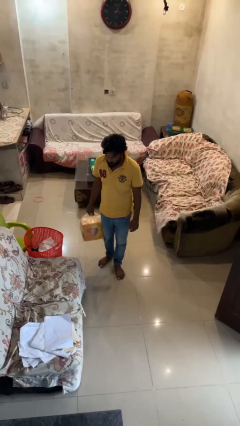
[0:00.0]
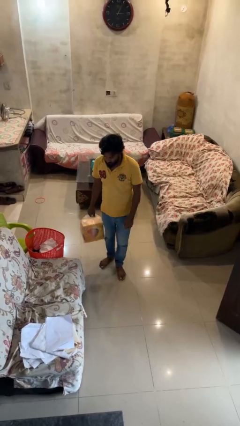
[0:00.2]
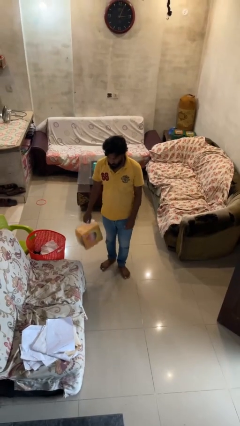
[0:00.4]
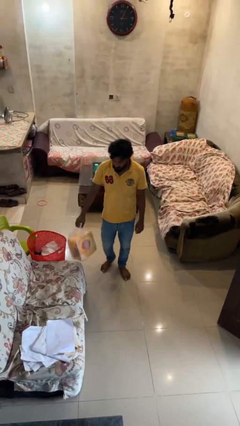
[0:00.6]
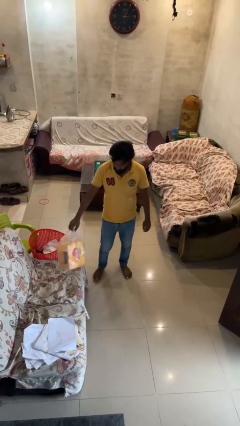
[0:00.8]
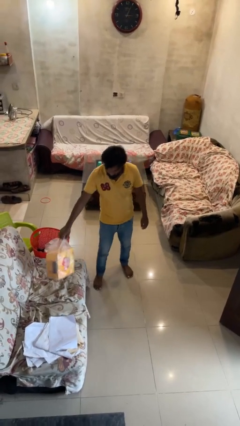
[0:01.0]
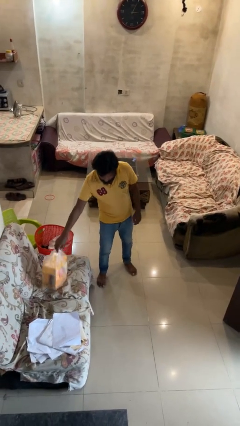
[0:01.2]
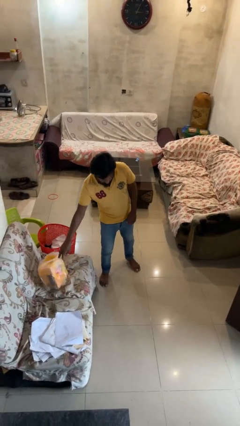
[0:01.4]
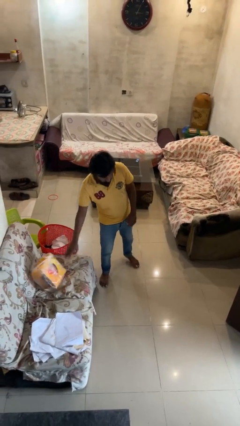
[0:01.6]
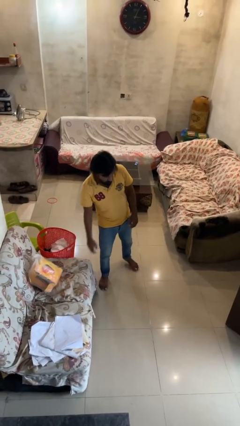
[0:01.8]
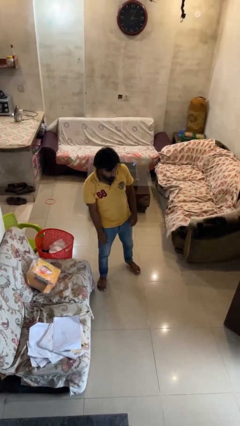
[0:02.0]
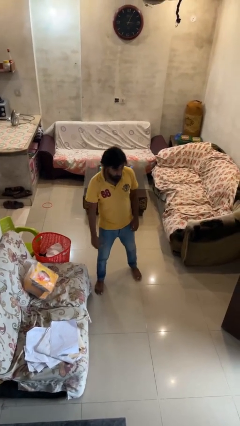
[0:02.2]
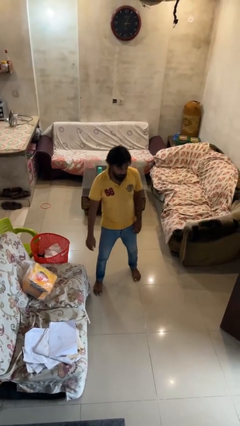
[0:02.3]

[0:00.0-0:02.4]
person puts down object on couch

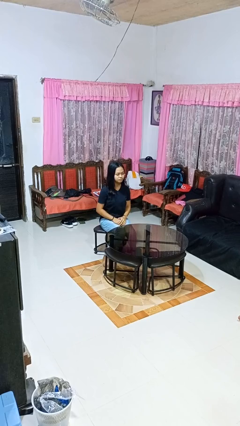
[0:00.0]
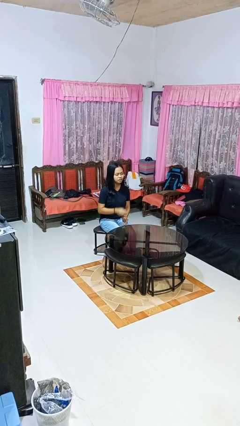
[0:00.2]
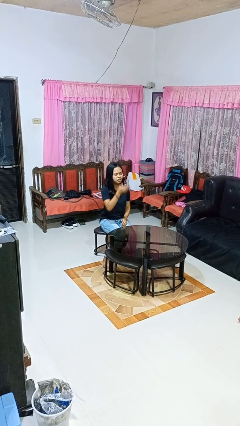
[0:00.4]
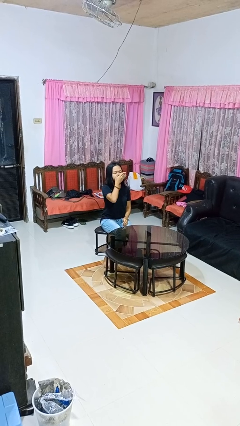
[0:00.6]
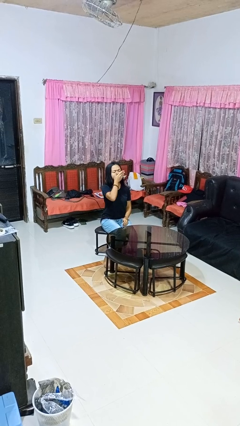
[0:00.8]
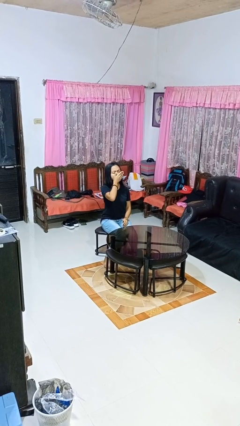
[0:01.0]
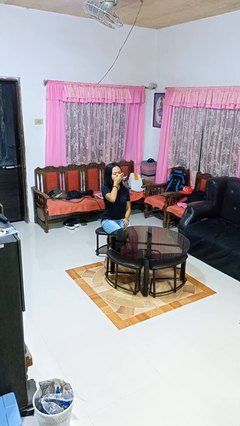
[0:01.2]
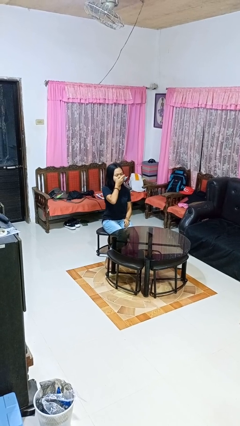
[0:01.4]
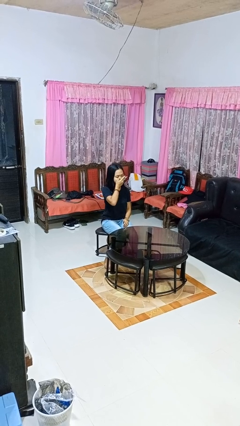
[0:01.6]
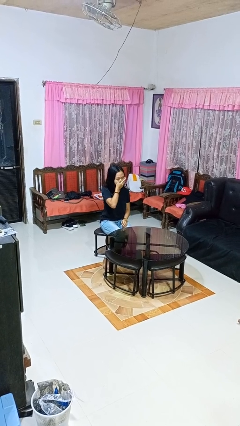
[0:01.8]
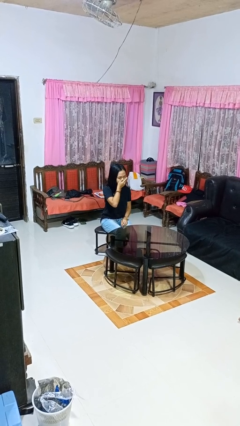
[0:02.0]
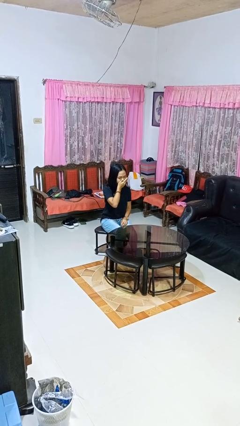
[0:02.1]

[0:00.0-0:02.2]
person yawns

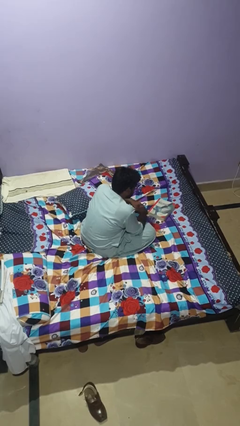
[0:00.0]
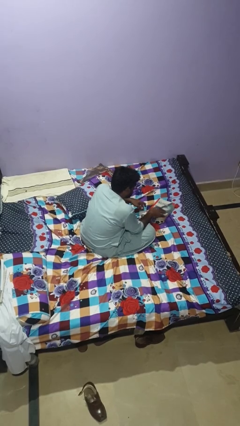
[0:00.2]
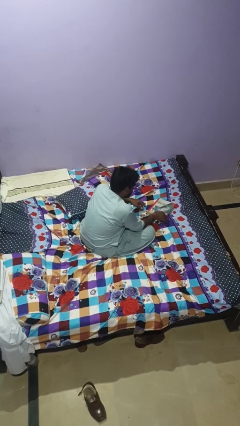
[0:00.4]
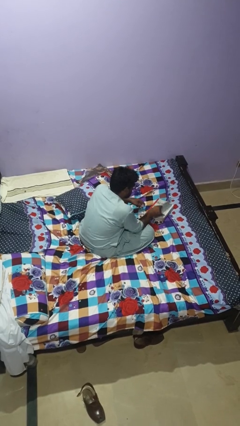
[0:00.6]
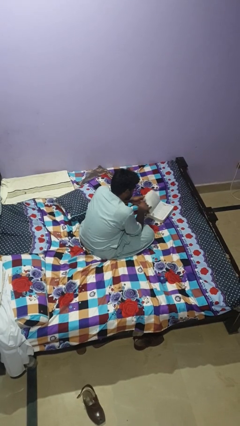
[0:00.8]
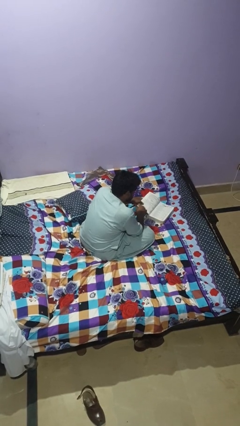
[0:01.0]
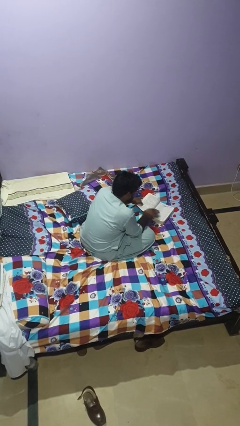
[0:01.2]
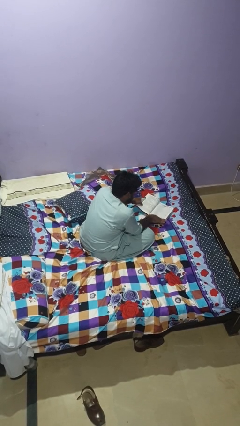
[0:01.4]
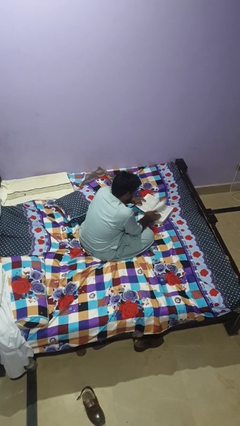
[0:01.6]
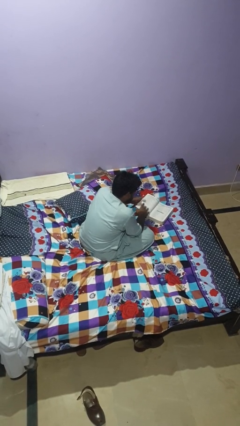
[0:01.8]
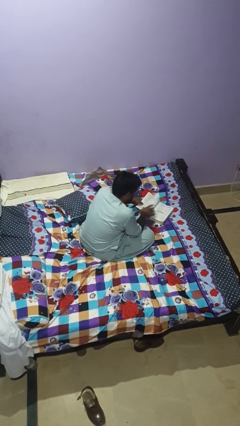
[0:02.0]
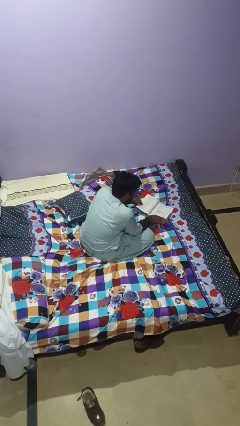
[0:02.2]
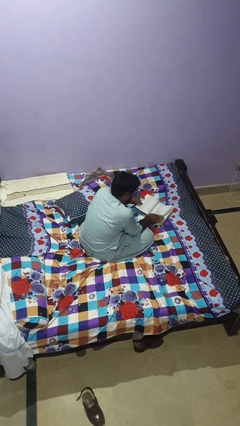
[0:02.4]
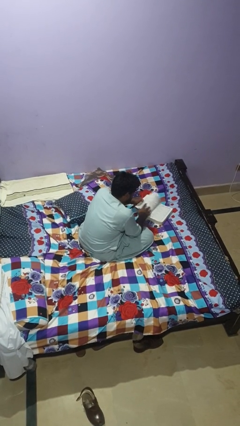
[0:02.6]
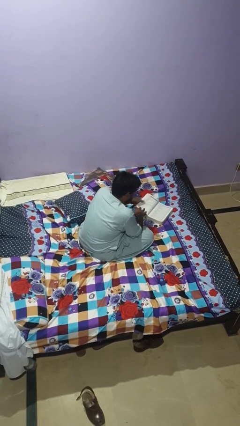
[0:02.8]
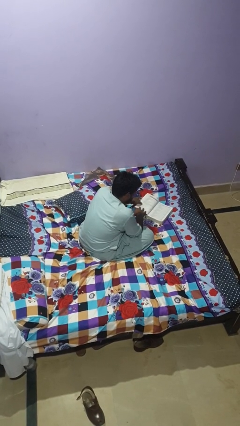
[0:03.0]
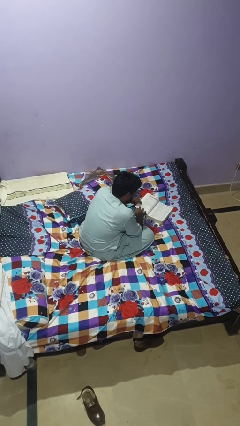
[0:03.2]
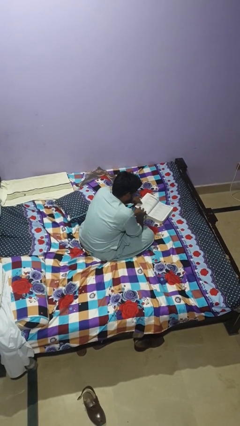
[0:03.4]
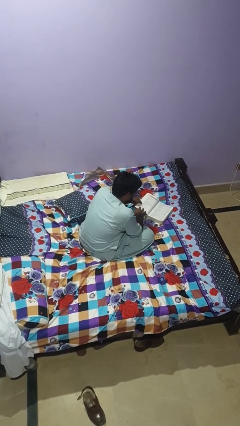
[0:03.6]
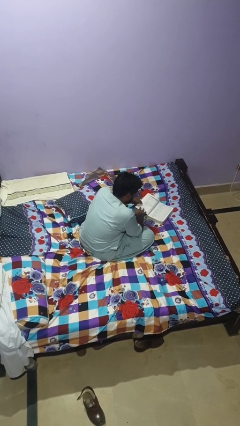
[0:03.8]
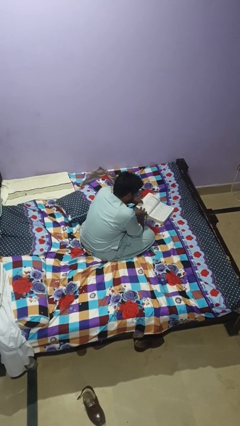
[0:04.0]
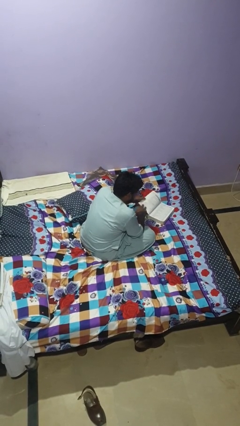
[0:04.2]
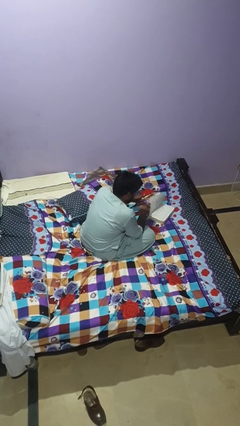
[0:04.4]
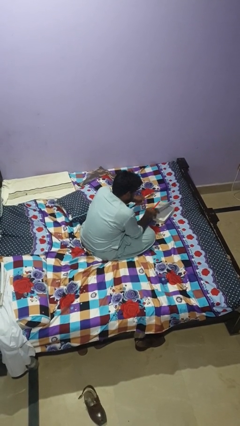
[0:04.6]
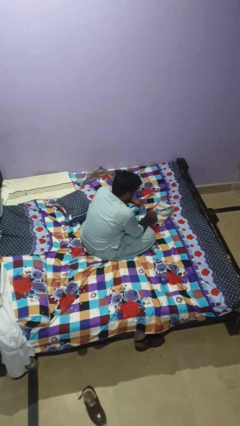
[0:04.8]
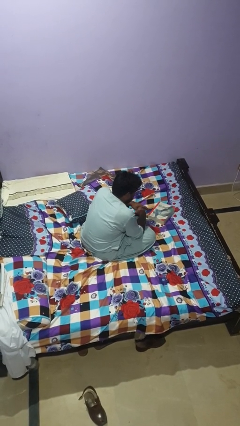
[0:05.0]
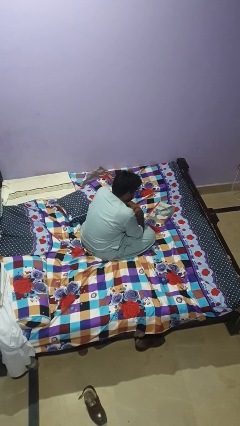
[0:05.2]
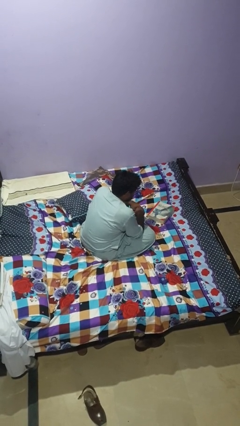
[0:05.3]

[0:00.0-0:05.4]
person reads book

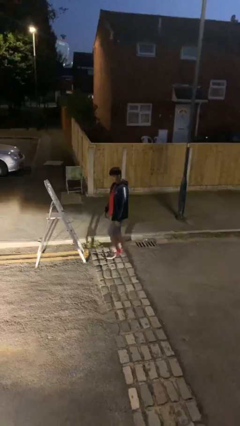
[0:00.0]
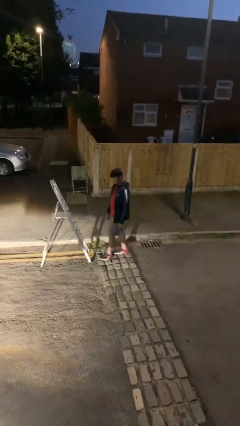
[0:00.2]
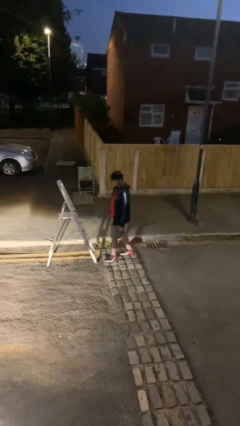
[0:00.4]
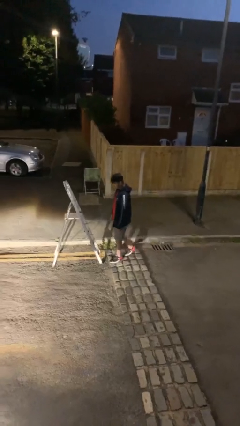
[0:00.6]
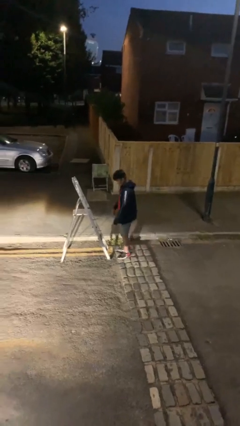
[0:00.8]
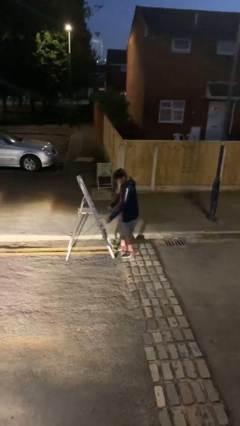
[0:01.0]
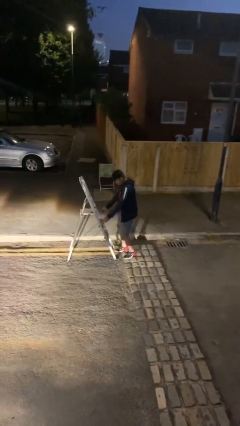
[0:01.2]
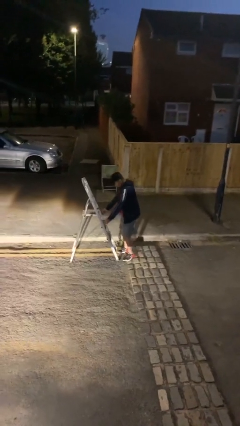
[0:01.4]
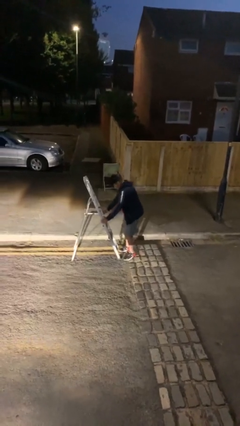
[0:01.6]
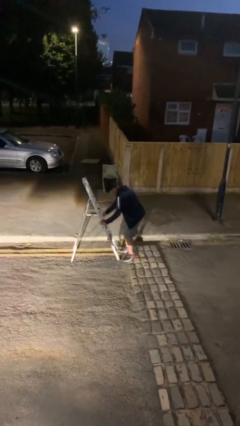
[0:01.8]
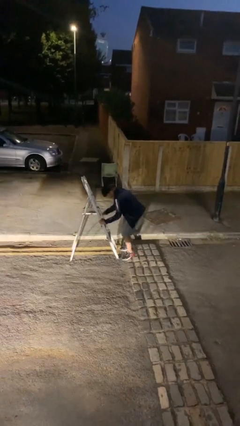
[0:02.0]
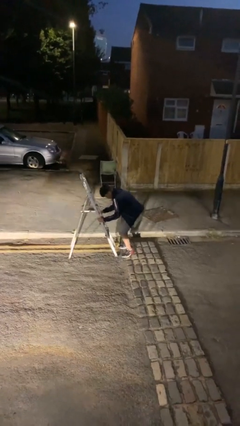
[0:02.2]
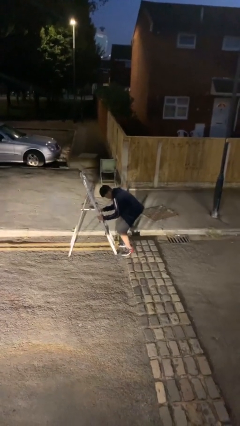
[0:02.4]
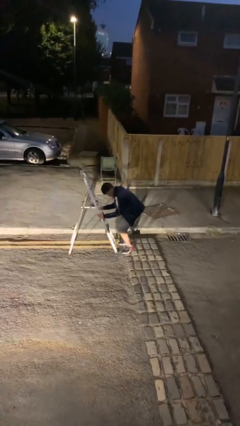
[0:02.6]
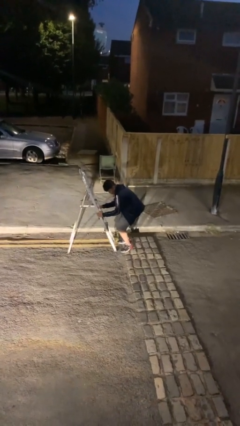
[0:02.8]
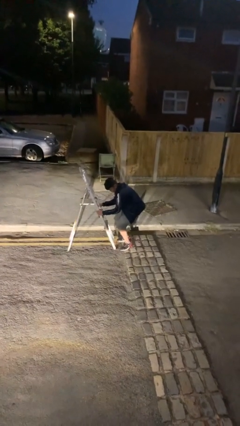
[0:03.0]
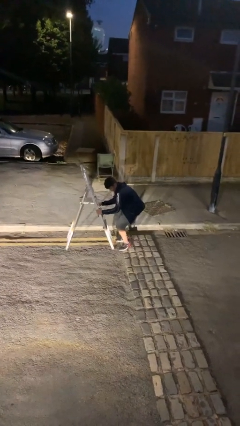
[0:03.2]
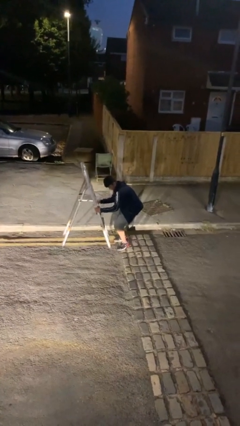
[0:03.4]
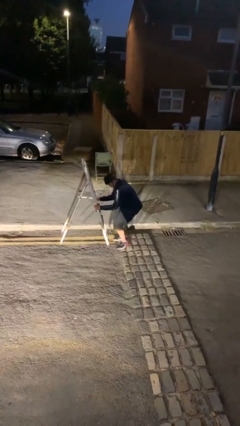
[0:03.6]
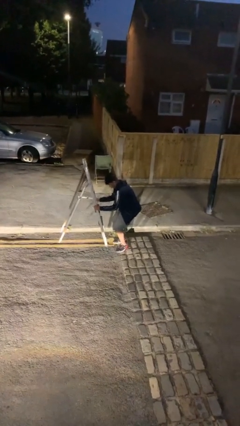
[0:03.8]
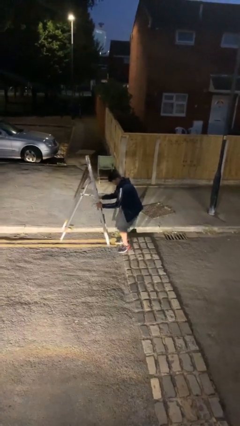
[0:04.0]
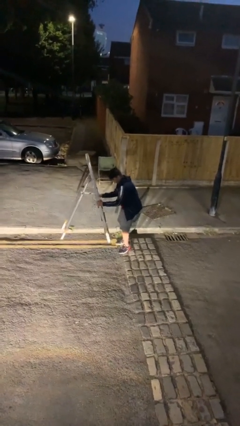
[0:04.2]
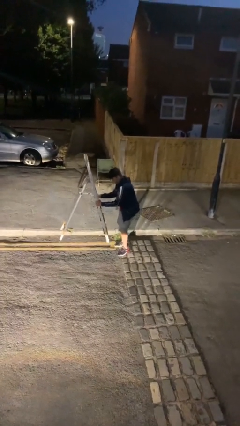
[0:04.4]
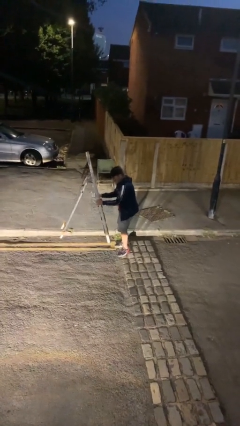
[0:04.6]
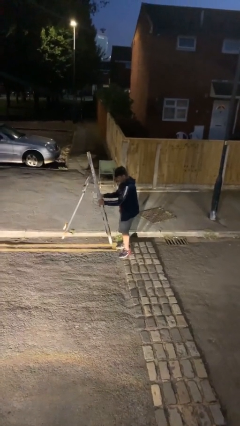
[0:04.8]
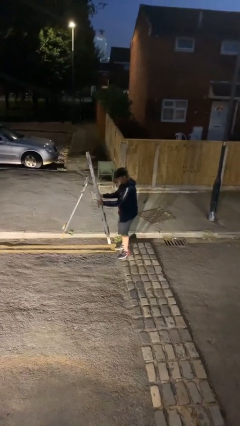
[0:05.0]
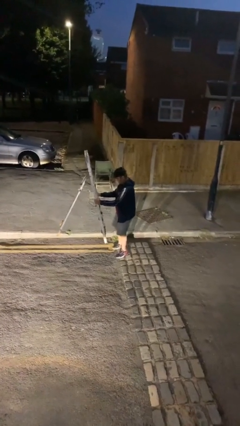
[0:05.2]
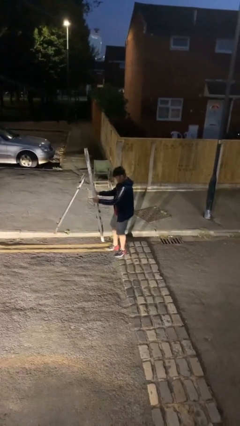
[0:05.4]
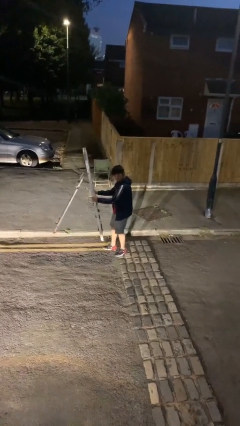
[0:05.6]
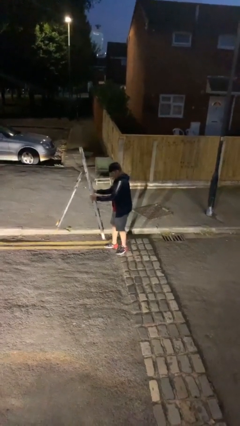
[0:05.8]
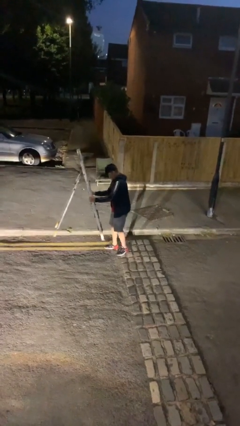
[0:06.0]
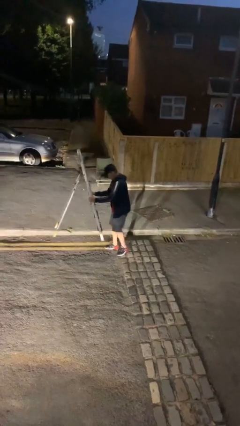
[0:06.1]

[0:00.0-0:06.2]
person picks up object from floor

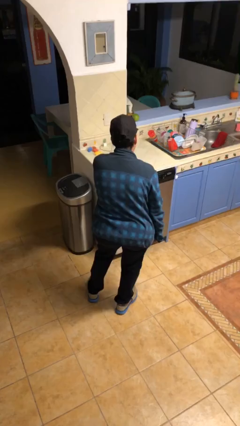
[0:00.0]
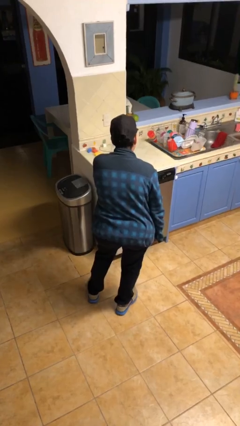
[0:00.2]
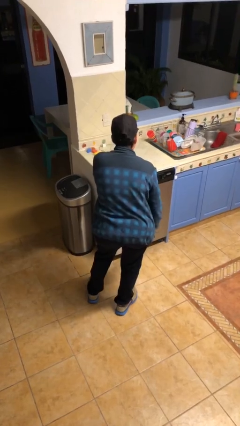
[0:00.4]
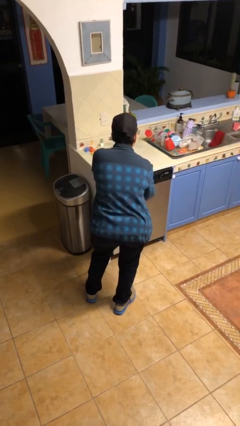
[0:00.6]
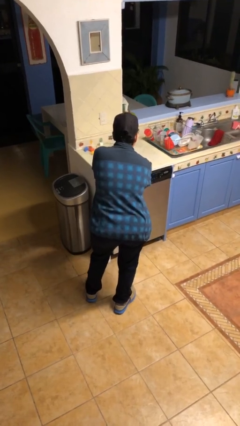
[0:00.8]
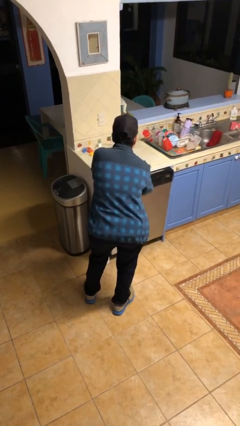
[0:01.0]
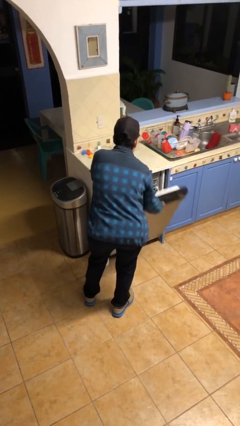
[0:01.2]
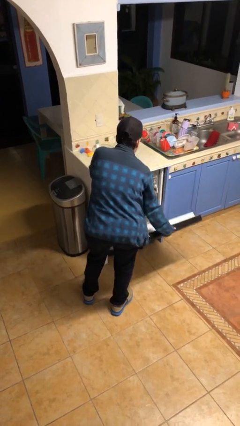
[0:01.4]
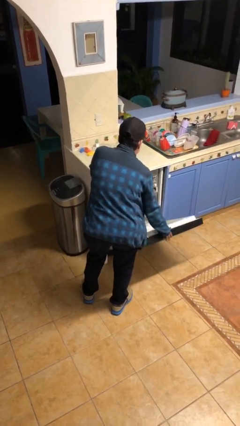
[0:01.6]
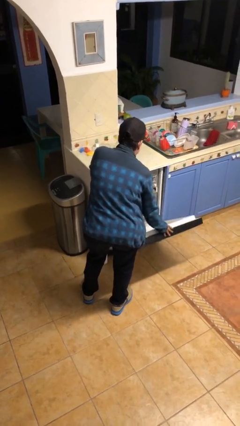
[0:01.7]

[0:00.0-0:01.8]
person opens dishwasher
